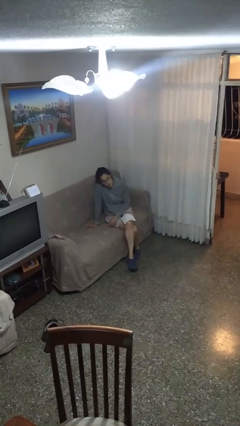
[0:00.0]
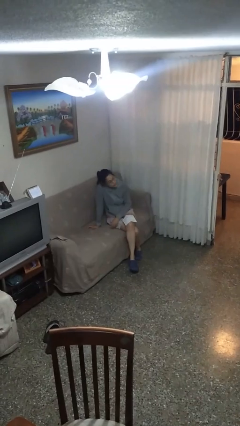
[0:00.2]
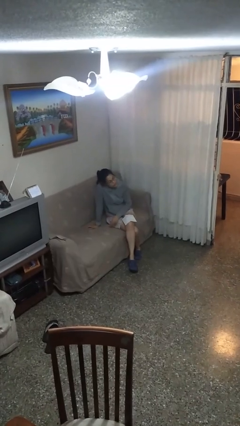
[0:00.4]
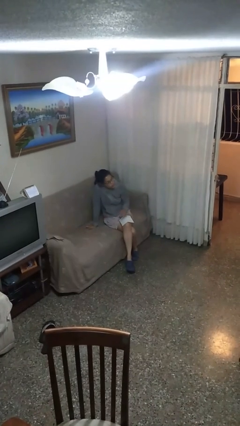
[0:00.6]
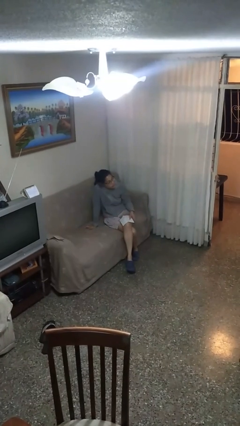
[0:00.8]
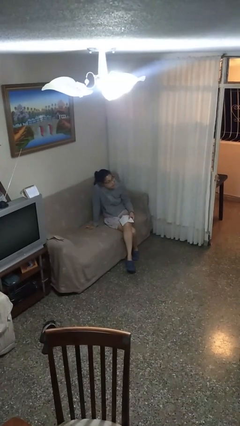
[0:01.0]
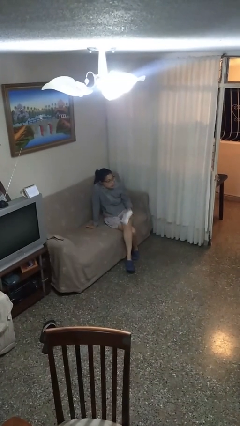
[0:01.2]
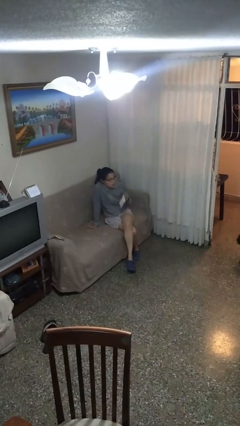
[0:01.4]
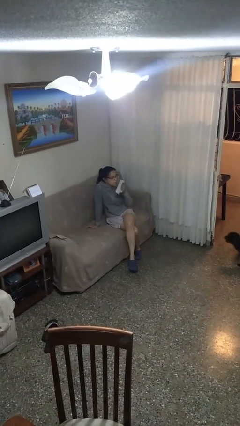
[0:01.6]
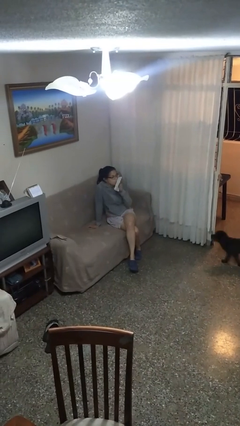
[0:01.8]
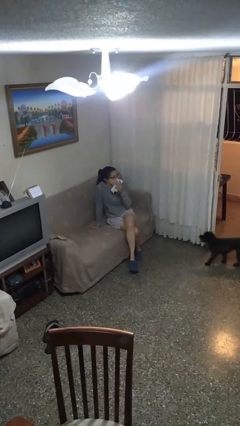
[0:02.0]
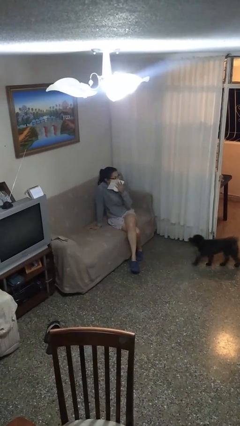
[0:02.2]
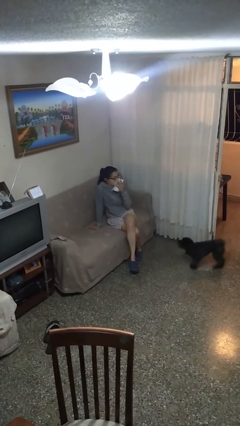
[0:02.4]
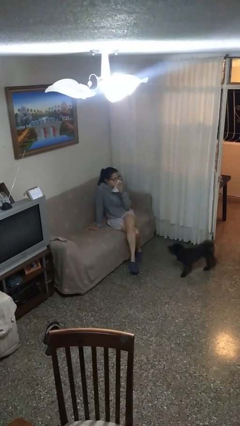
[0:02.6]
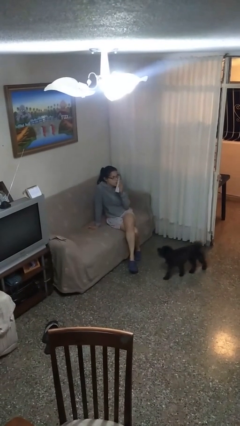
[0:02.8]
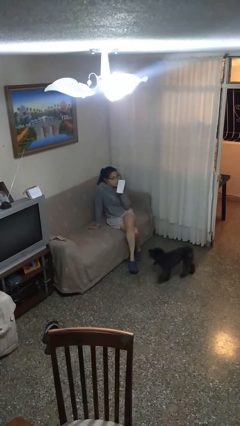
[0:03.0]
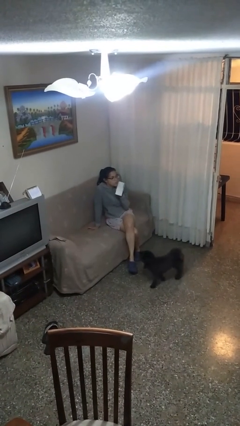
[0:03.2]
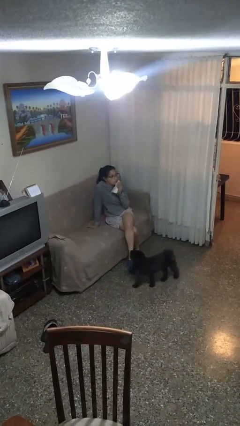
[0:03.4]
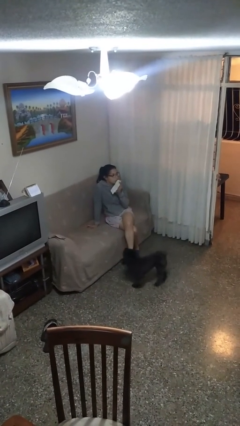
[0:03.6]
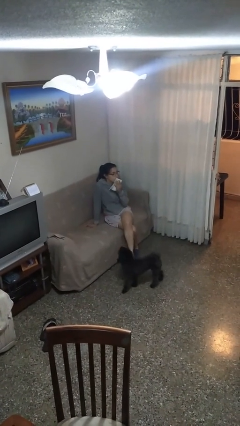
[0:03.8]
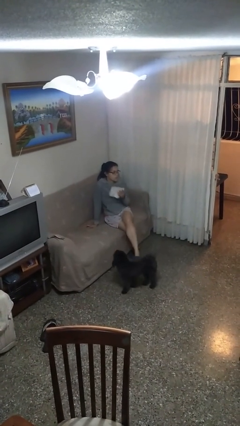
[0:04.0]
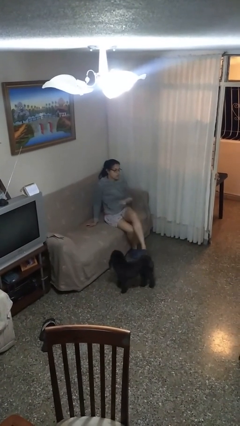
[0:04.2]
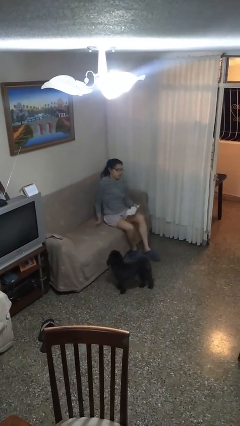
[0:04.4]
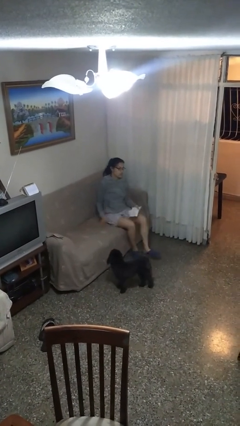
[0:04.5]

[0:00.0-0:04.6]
person wipes mouth with napkin

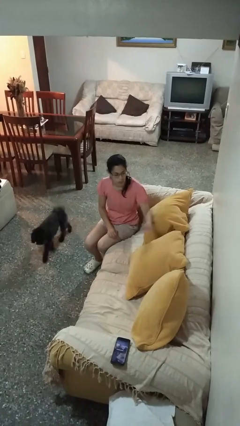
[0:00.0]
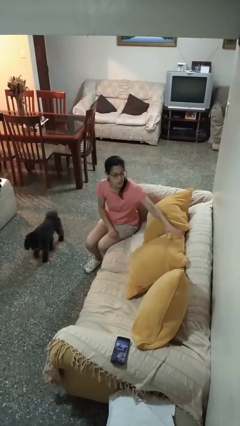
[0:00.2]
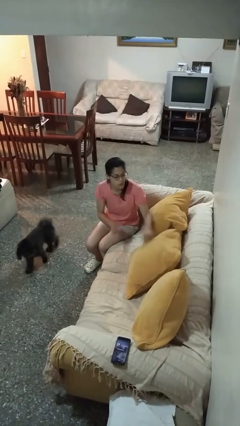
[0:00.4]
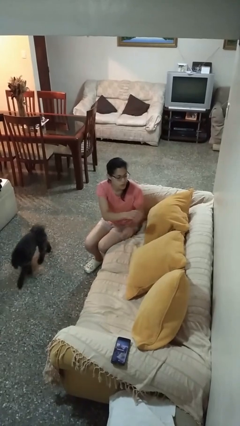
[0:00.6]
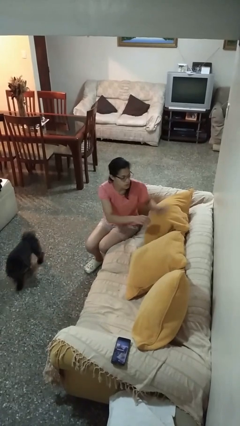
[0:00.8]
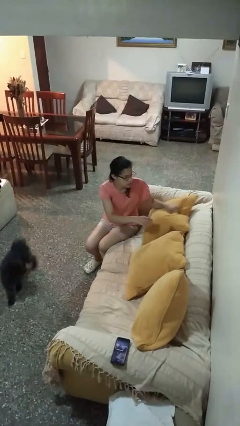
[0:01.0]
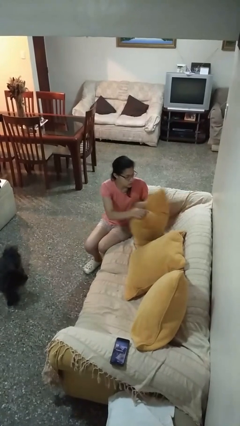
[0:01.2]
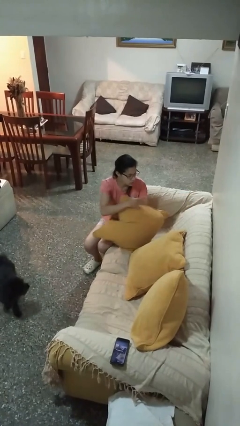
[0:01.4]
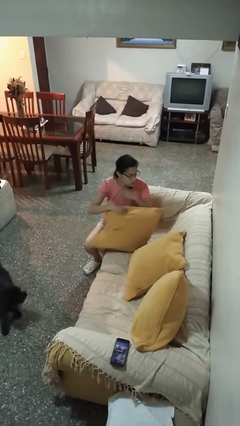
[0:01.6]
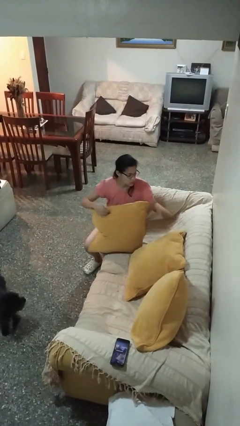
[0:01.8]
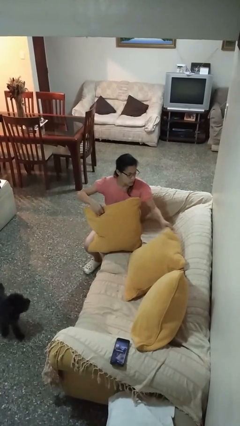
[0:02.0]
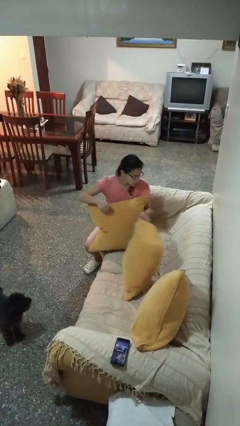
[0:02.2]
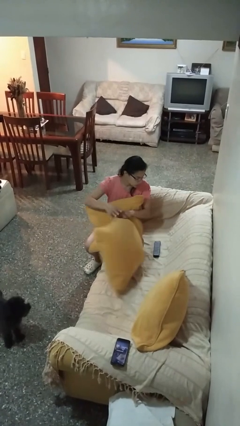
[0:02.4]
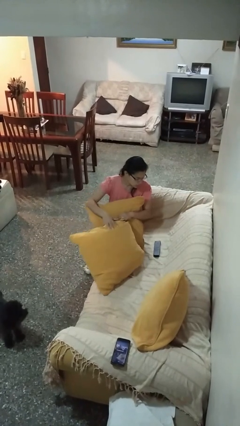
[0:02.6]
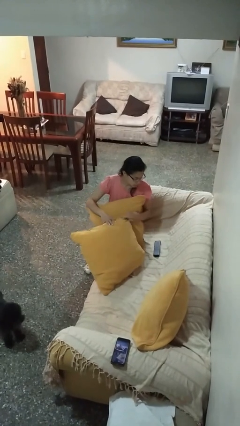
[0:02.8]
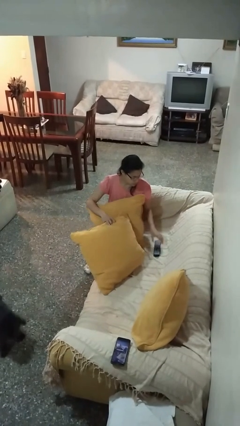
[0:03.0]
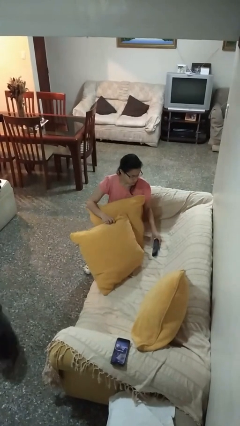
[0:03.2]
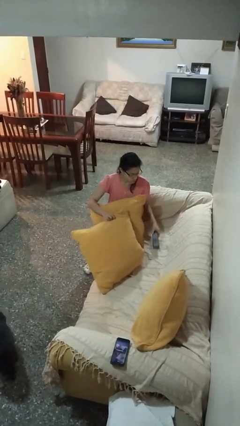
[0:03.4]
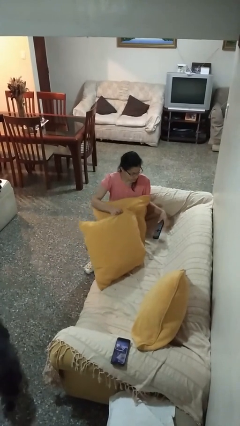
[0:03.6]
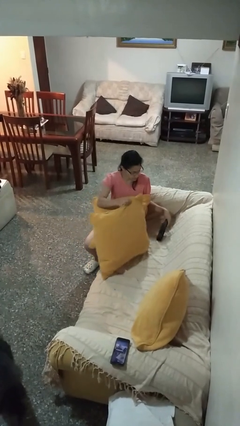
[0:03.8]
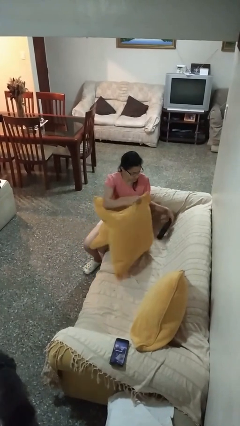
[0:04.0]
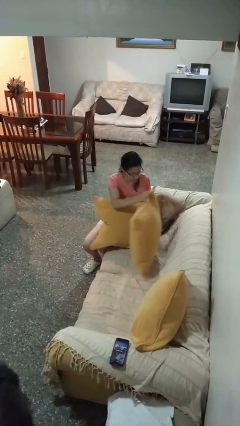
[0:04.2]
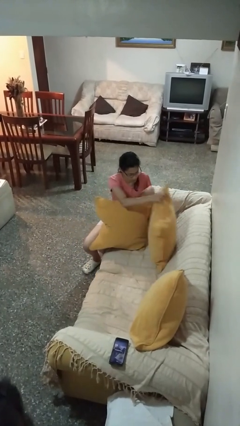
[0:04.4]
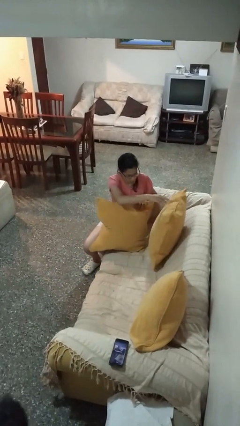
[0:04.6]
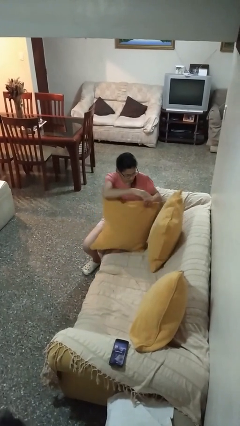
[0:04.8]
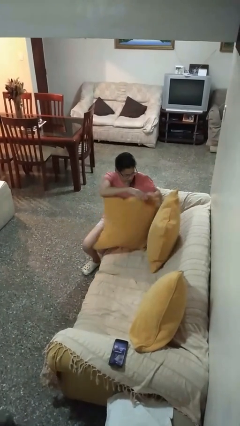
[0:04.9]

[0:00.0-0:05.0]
person searches in couch

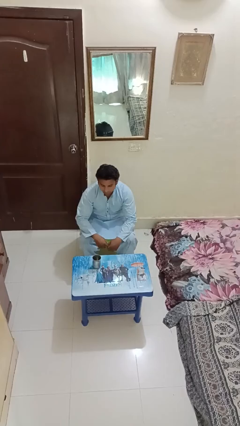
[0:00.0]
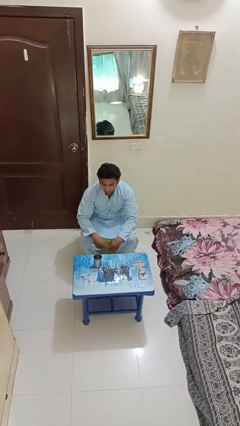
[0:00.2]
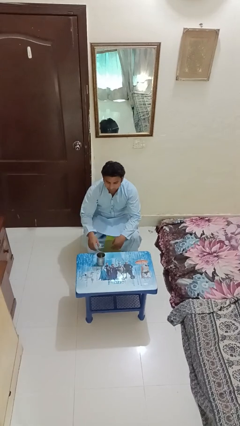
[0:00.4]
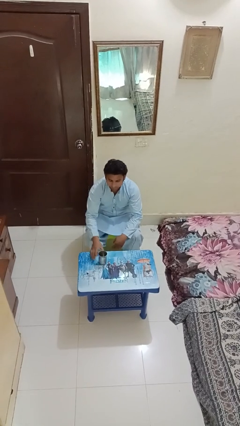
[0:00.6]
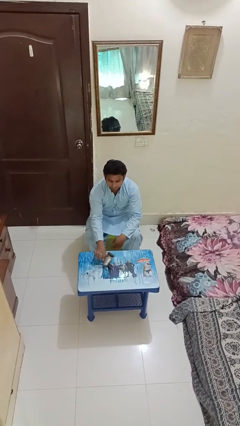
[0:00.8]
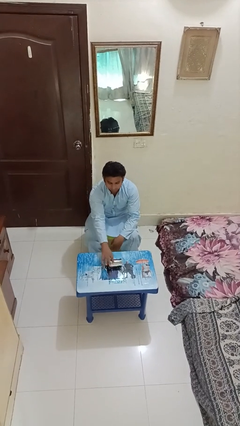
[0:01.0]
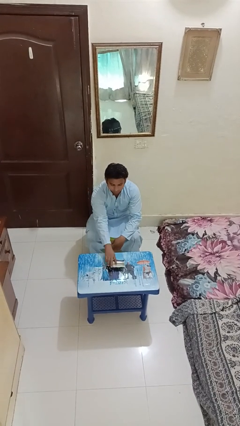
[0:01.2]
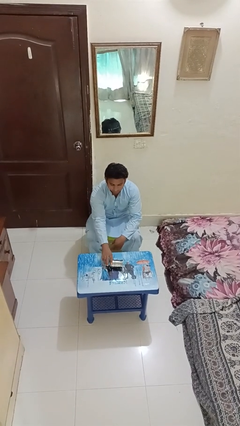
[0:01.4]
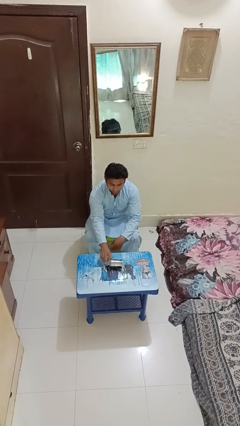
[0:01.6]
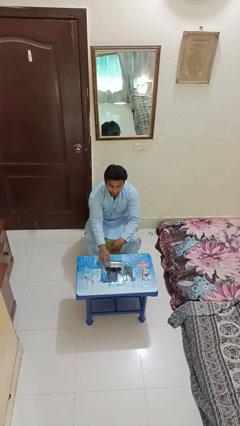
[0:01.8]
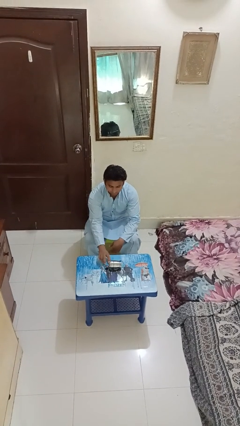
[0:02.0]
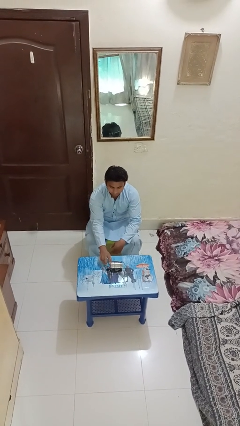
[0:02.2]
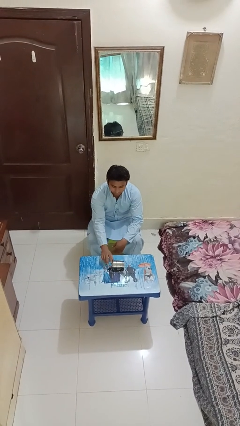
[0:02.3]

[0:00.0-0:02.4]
person knocks over glass

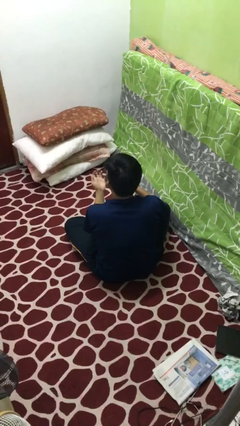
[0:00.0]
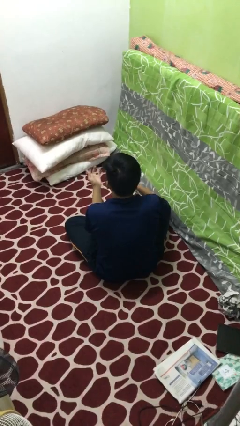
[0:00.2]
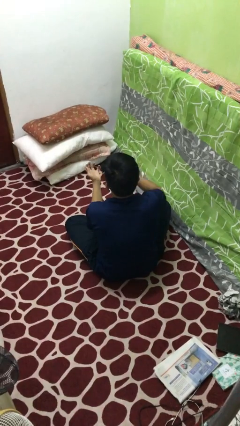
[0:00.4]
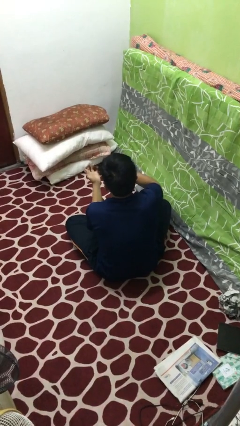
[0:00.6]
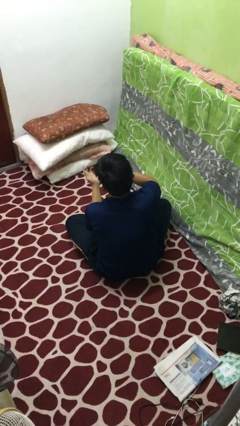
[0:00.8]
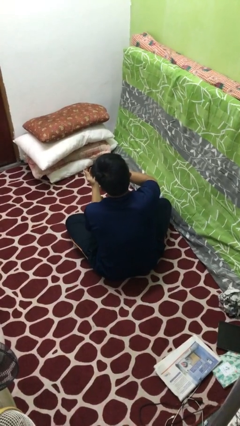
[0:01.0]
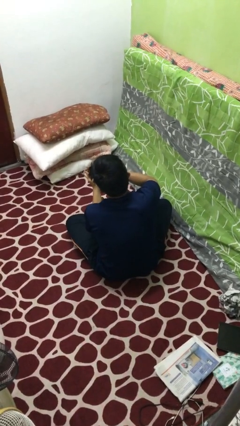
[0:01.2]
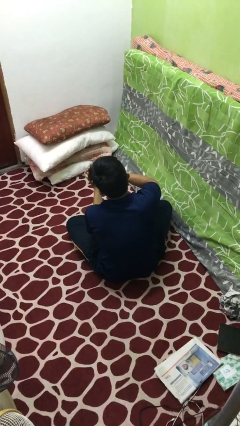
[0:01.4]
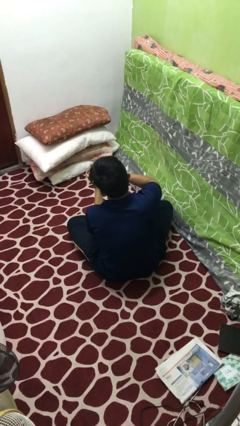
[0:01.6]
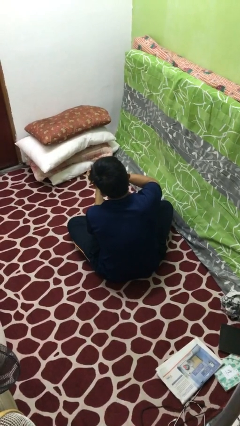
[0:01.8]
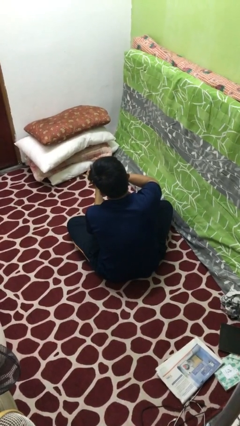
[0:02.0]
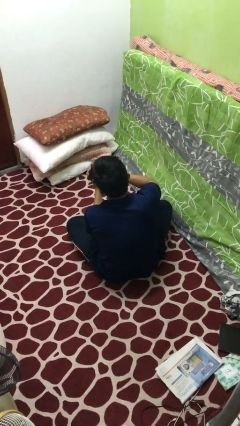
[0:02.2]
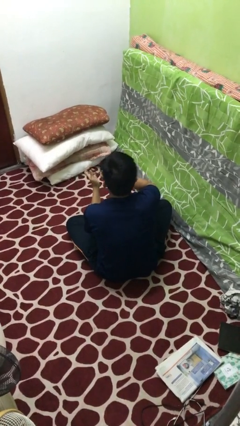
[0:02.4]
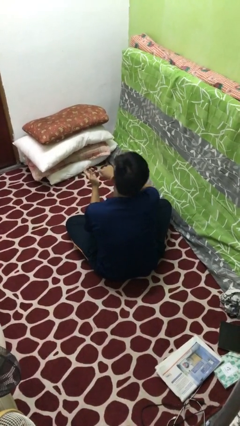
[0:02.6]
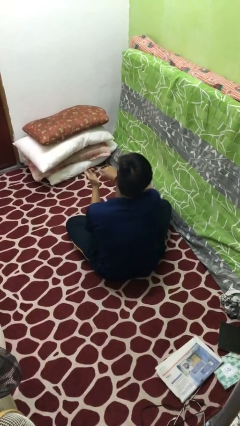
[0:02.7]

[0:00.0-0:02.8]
person clips fingernails

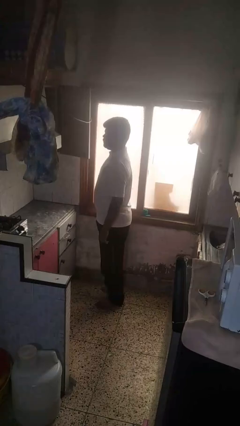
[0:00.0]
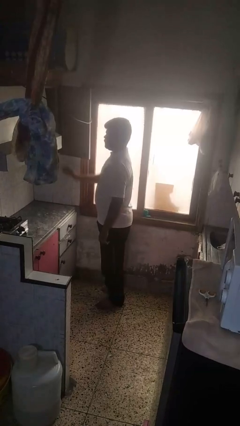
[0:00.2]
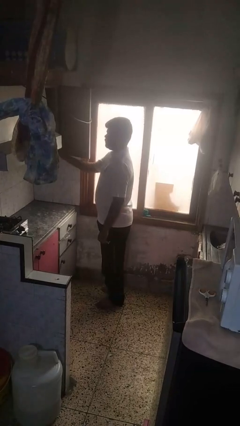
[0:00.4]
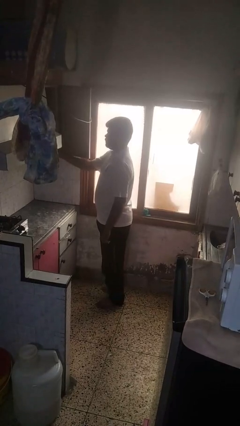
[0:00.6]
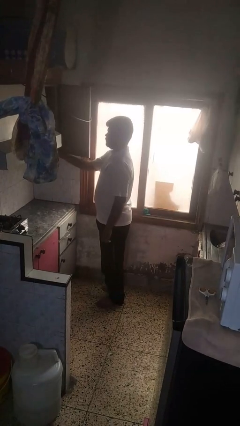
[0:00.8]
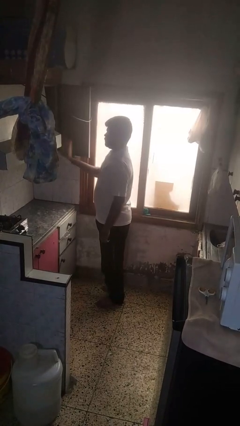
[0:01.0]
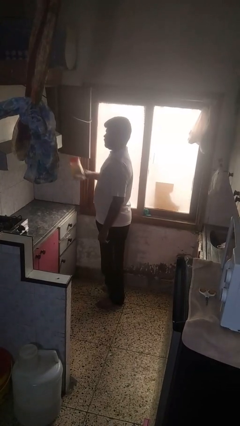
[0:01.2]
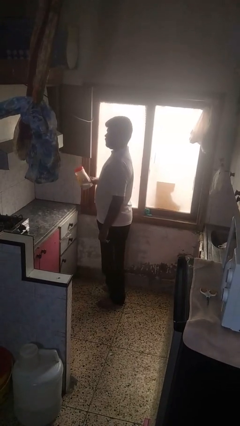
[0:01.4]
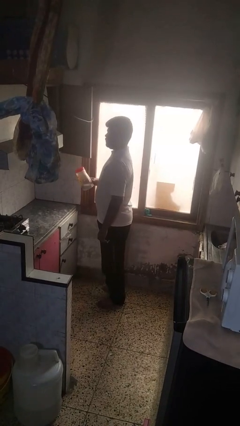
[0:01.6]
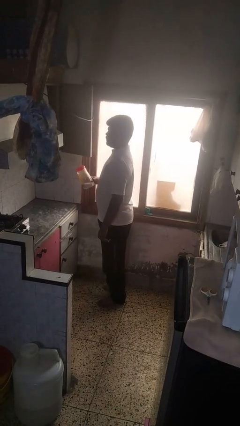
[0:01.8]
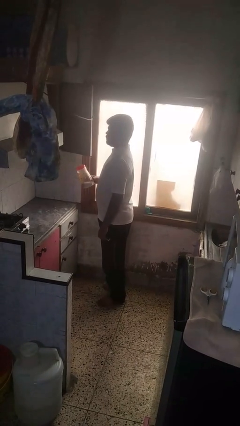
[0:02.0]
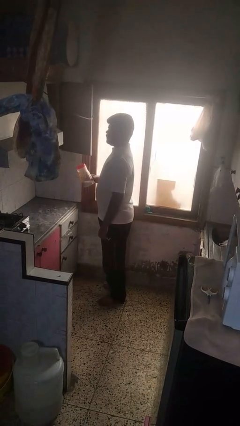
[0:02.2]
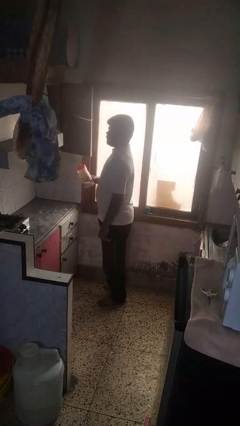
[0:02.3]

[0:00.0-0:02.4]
person picks up object from cabinet

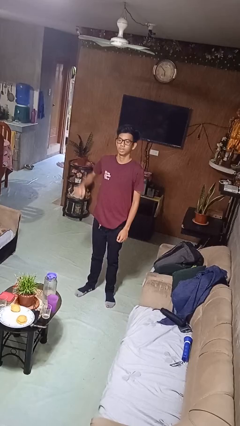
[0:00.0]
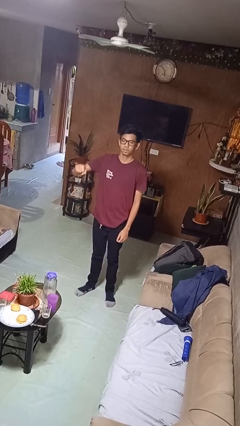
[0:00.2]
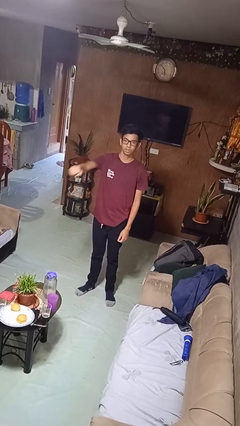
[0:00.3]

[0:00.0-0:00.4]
person punches
